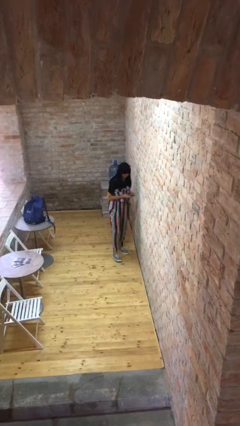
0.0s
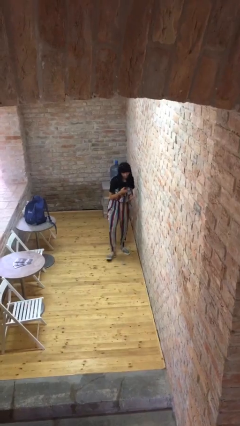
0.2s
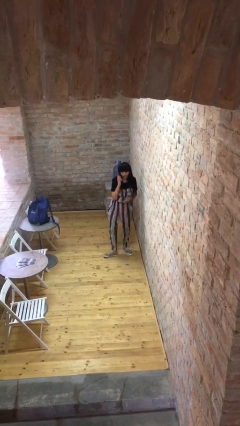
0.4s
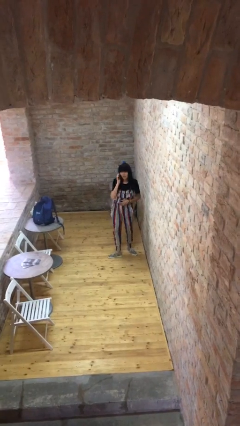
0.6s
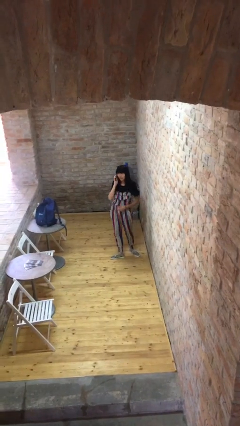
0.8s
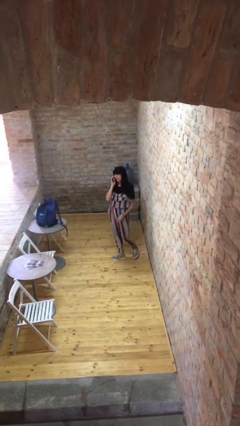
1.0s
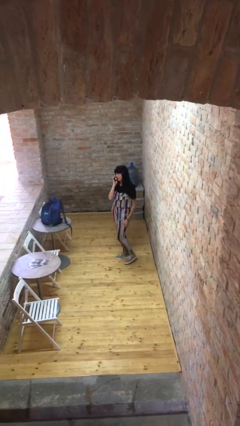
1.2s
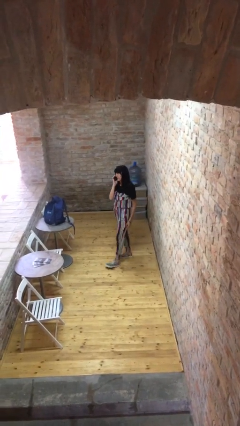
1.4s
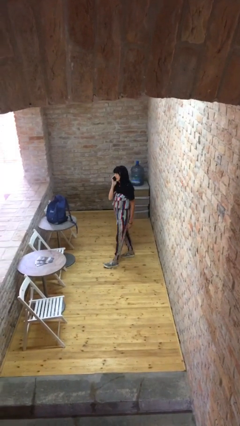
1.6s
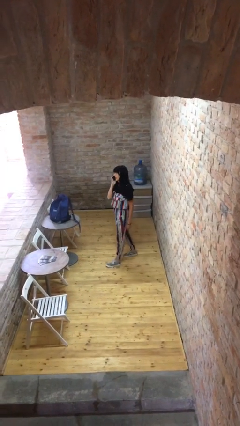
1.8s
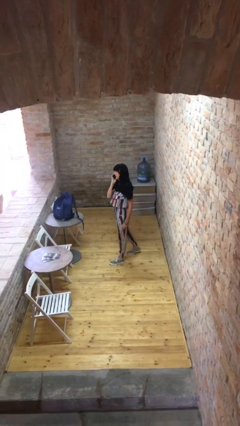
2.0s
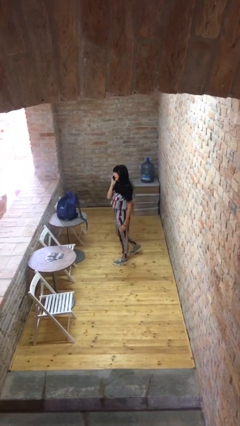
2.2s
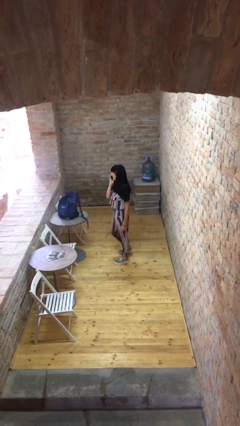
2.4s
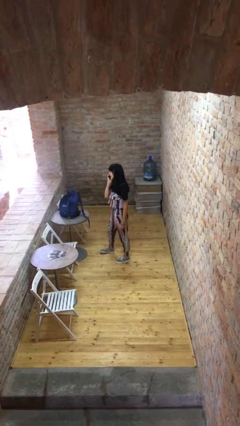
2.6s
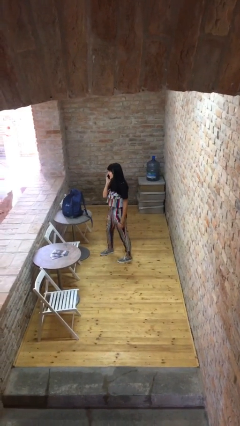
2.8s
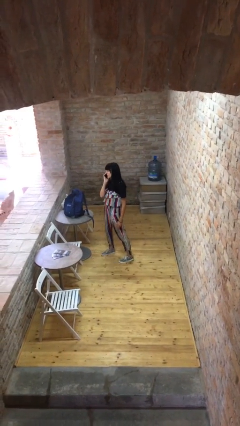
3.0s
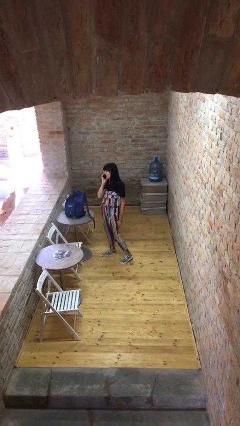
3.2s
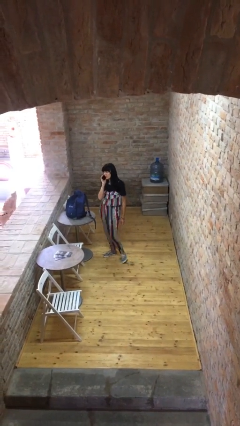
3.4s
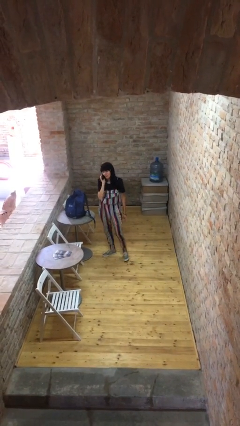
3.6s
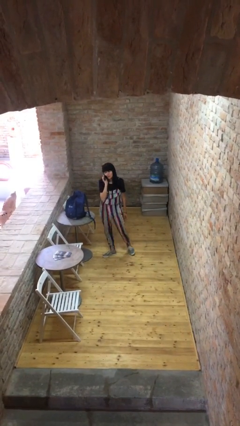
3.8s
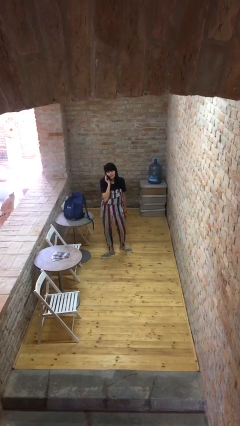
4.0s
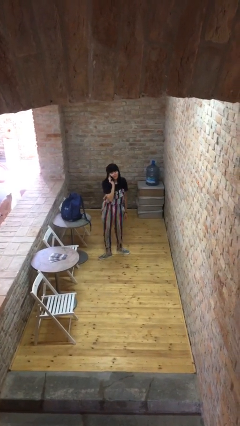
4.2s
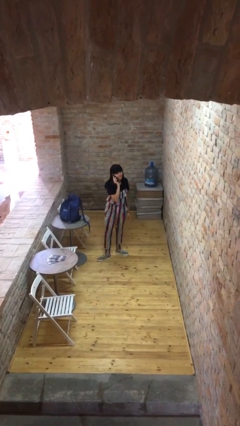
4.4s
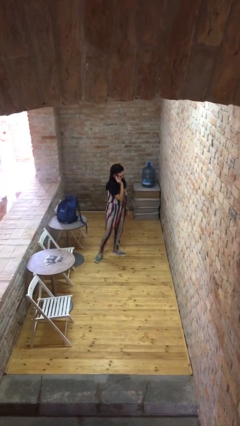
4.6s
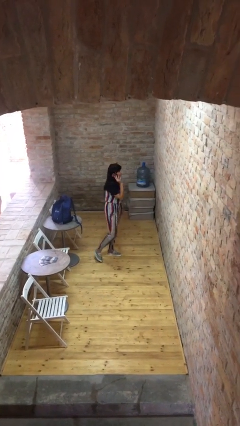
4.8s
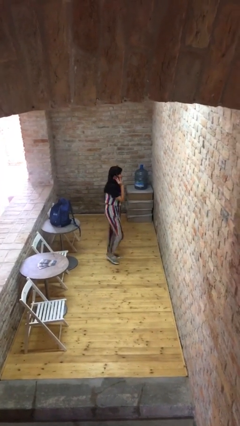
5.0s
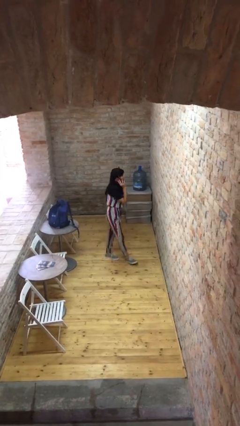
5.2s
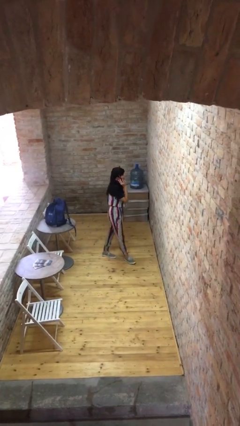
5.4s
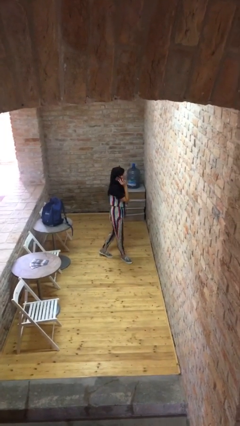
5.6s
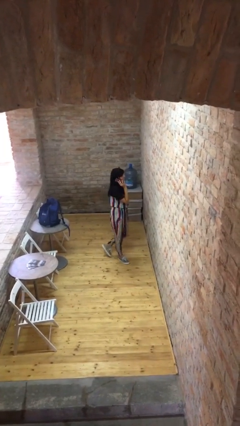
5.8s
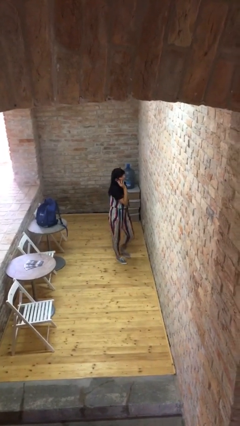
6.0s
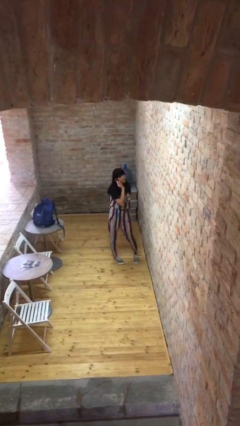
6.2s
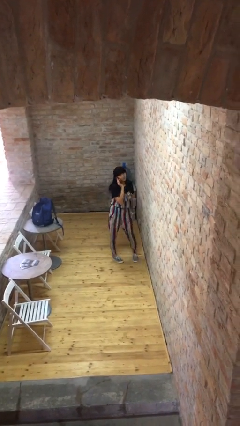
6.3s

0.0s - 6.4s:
person talks on phone

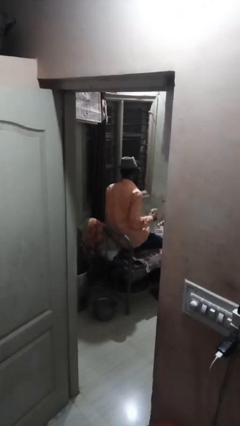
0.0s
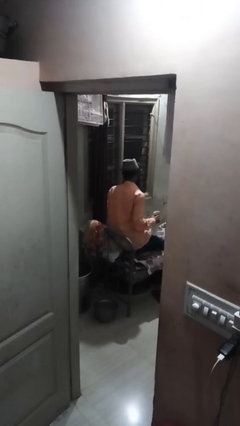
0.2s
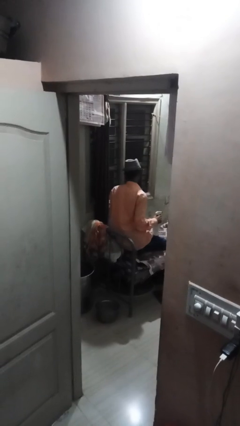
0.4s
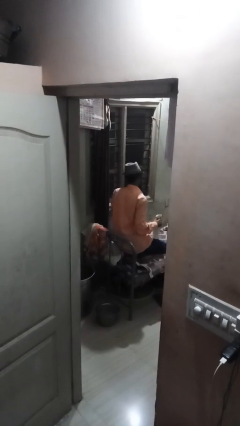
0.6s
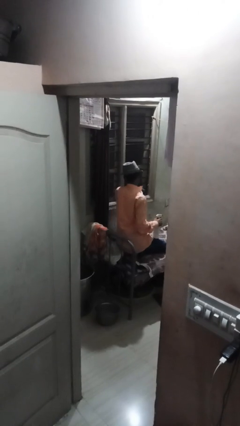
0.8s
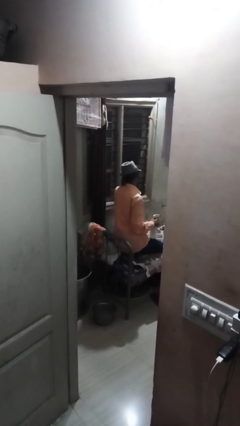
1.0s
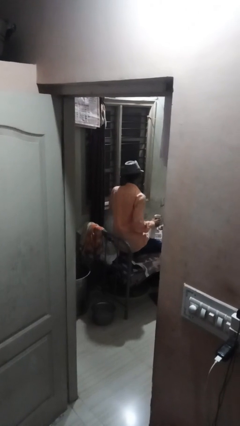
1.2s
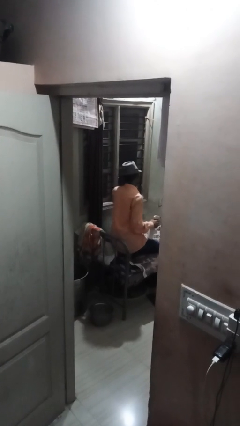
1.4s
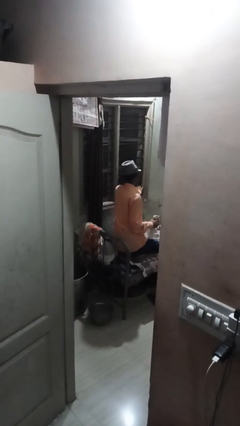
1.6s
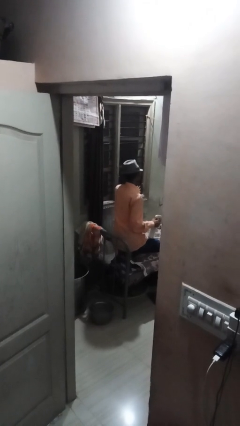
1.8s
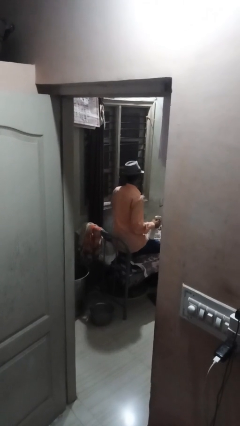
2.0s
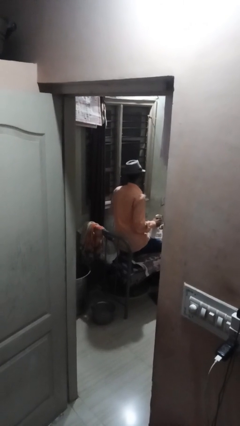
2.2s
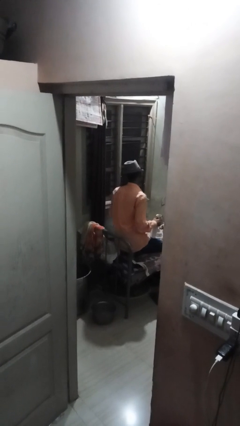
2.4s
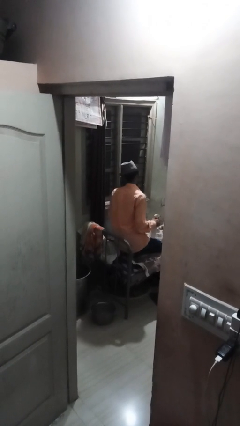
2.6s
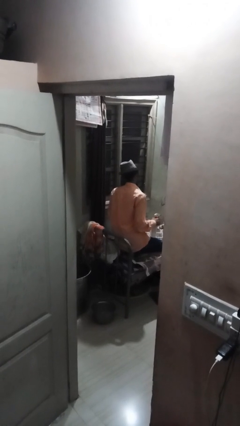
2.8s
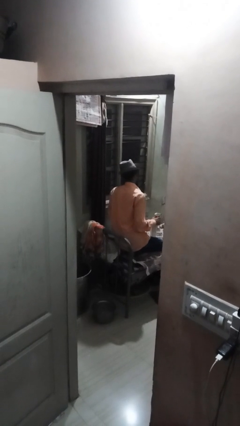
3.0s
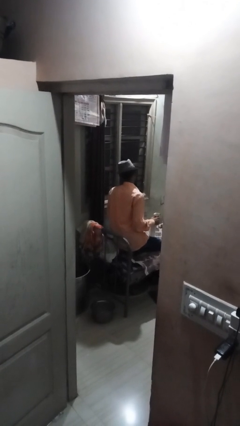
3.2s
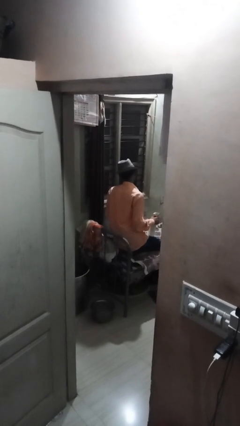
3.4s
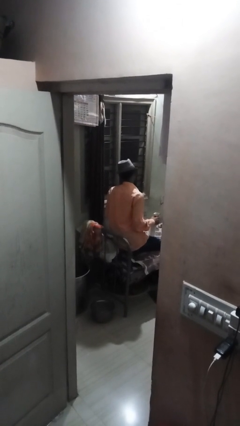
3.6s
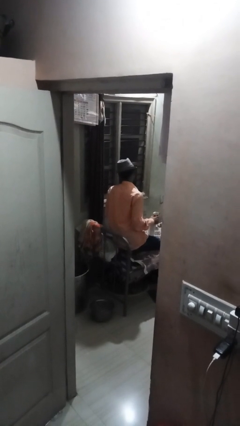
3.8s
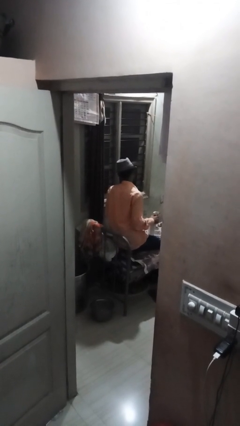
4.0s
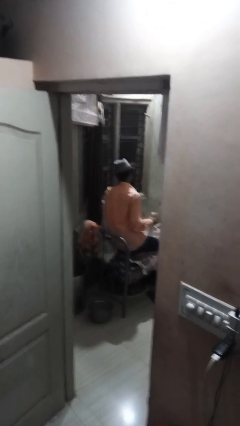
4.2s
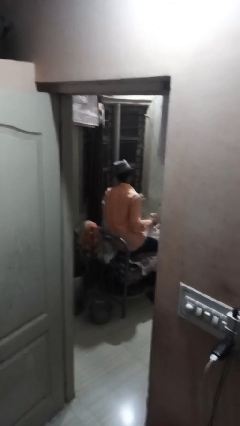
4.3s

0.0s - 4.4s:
person washes window

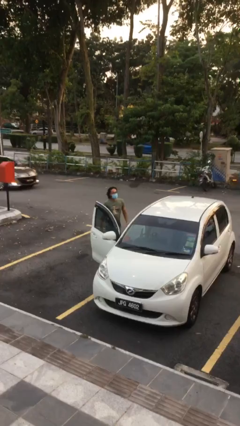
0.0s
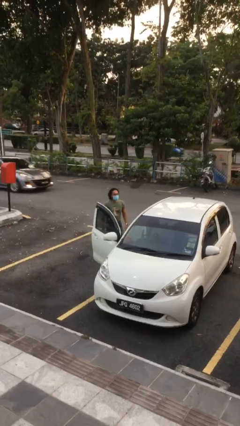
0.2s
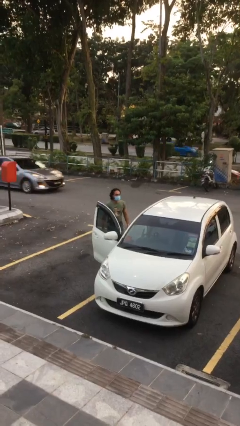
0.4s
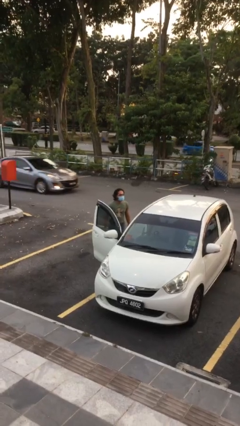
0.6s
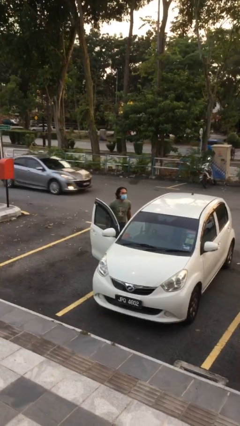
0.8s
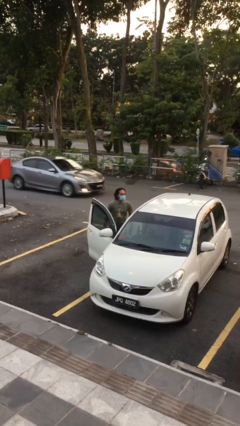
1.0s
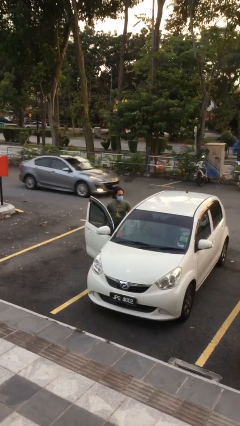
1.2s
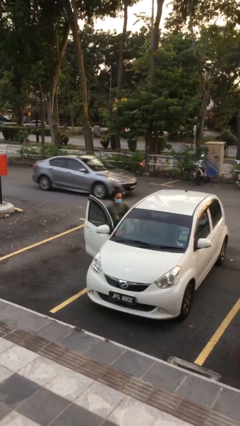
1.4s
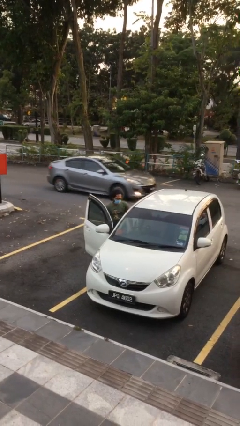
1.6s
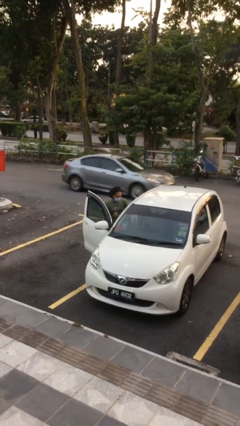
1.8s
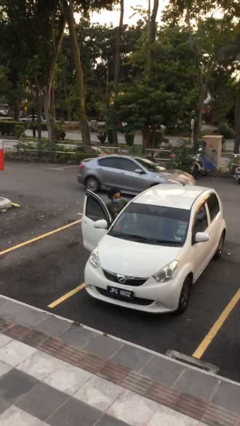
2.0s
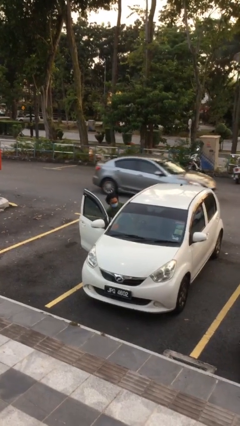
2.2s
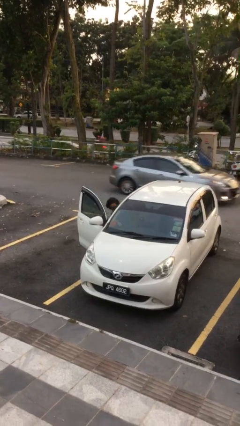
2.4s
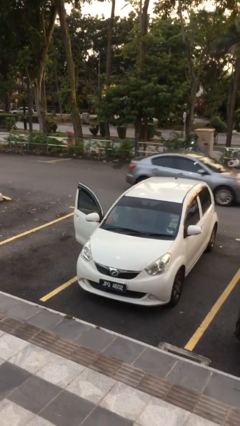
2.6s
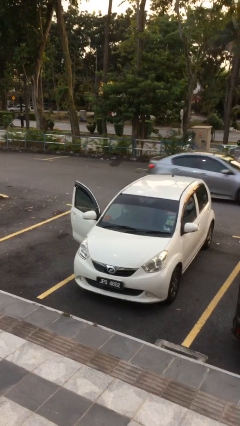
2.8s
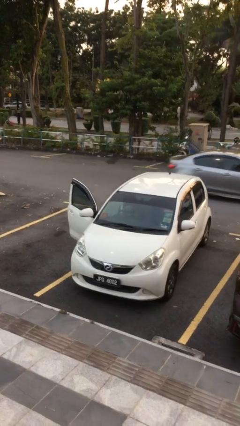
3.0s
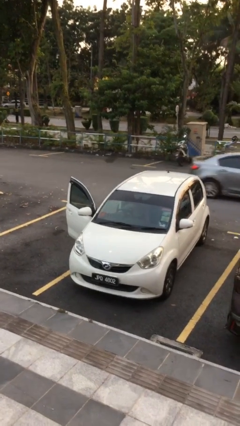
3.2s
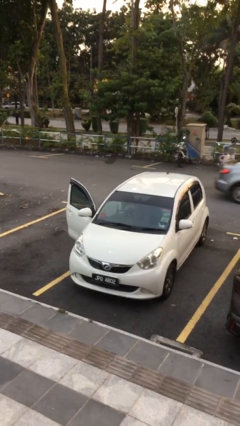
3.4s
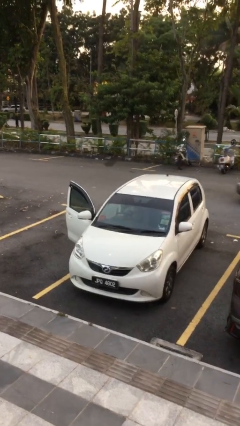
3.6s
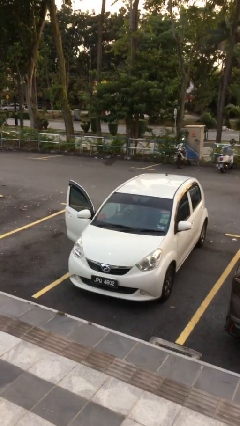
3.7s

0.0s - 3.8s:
person enters car

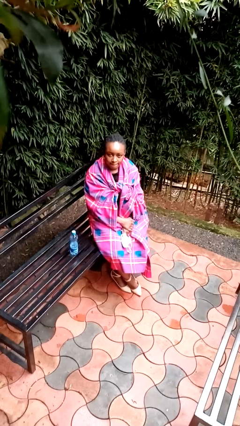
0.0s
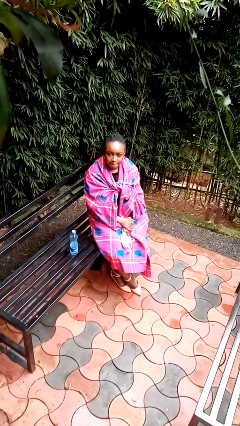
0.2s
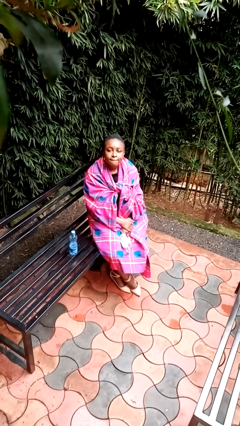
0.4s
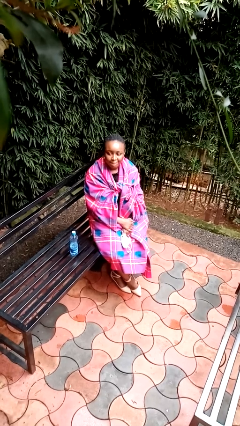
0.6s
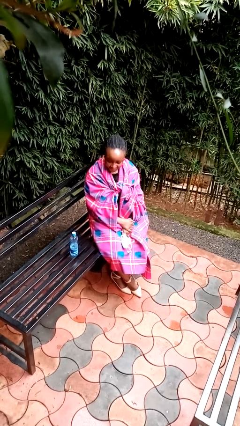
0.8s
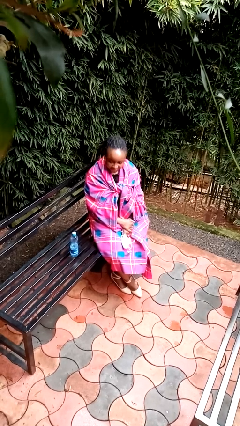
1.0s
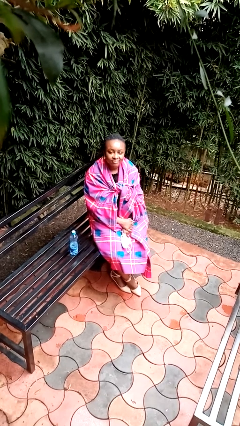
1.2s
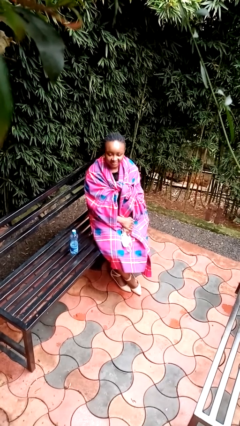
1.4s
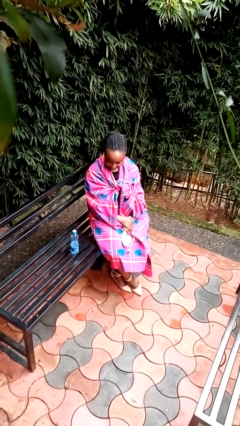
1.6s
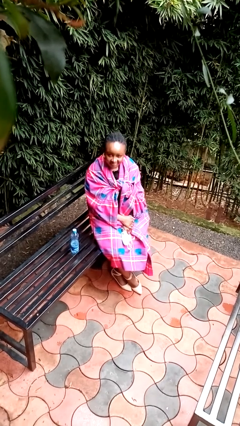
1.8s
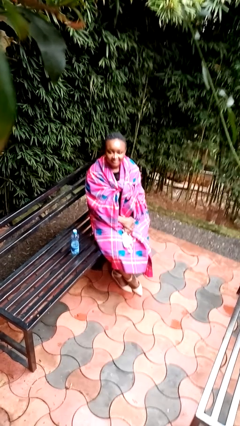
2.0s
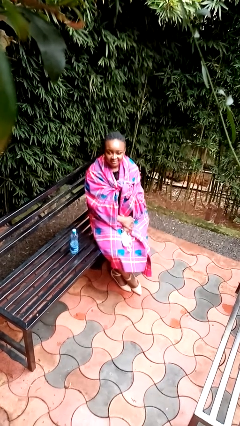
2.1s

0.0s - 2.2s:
person nods head

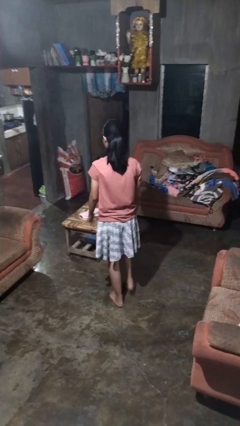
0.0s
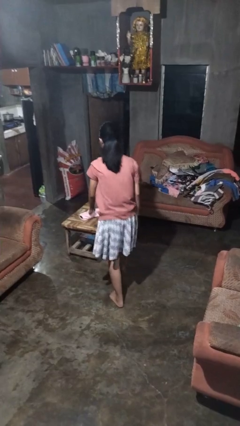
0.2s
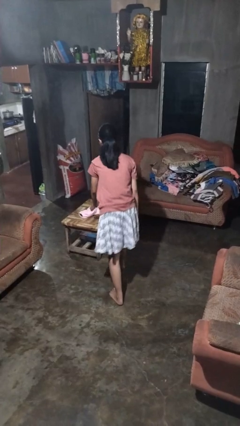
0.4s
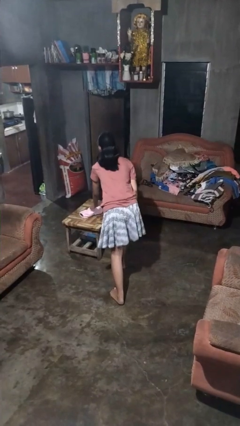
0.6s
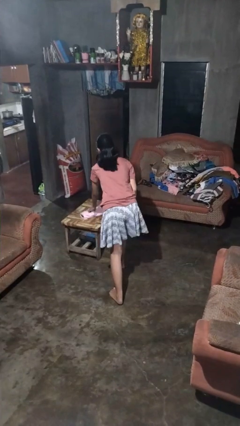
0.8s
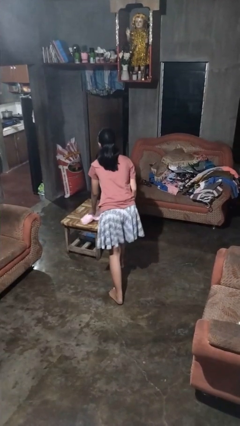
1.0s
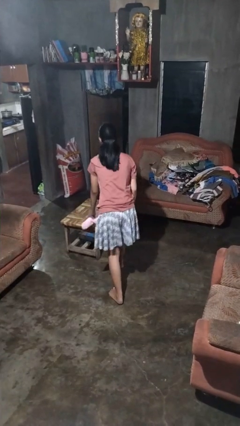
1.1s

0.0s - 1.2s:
person picks up object from table
